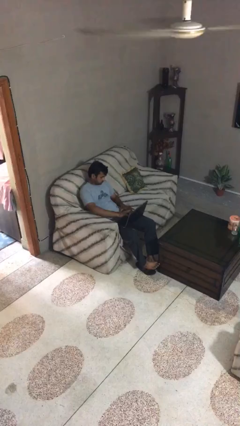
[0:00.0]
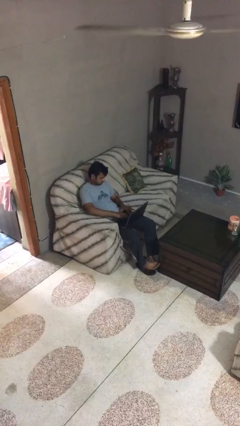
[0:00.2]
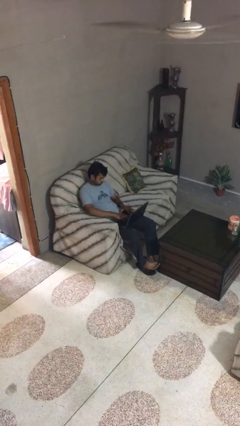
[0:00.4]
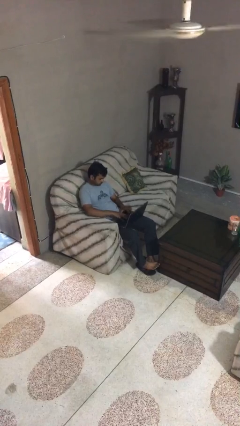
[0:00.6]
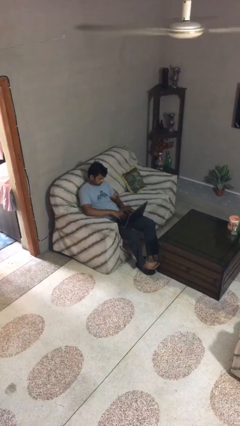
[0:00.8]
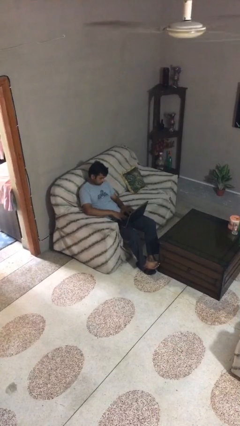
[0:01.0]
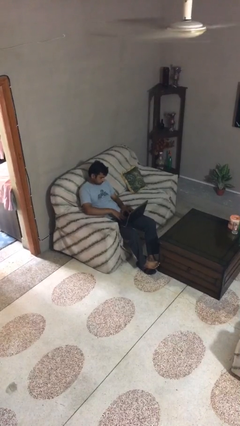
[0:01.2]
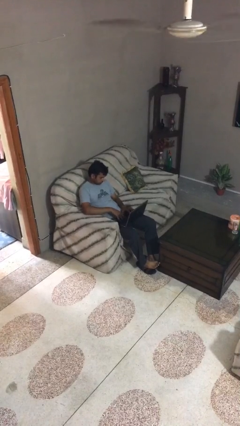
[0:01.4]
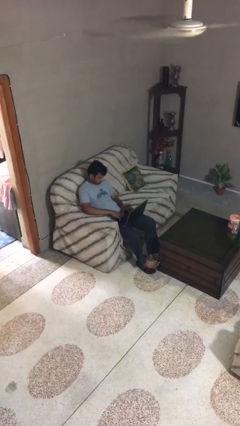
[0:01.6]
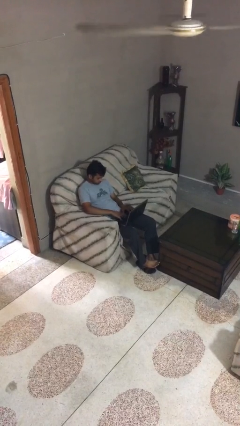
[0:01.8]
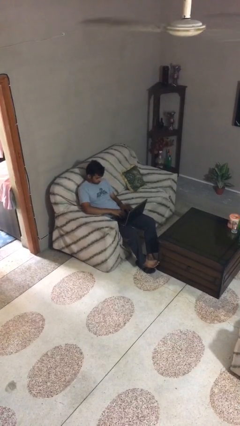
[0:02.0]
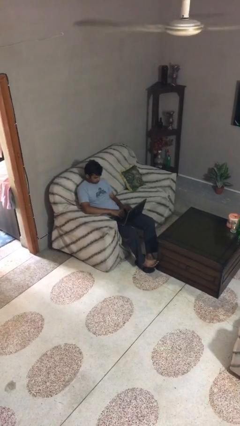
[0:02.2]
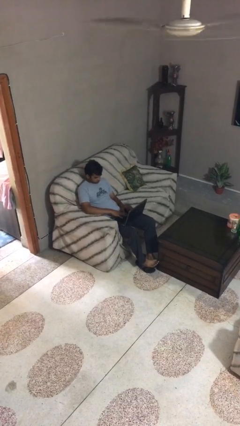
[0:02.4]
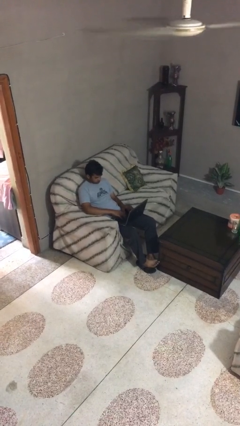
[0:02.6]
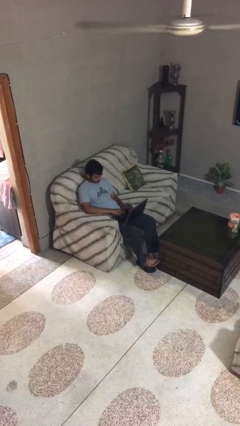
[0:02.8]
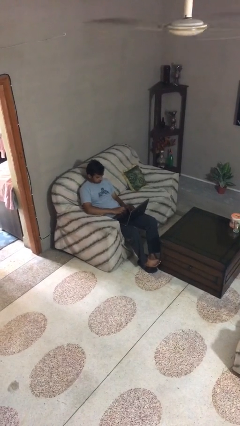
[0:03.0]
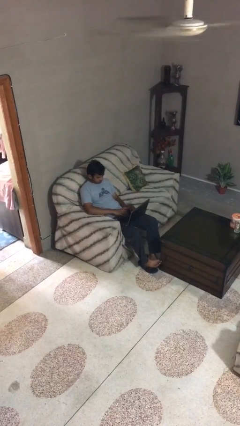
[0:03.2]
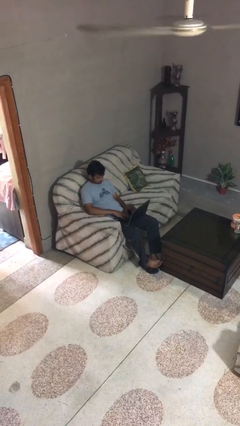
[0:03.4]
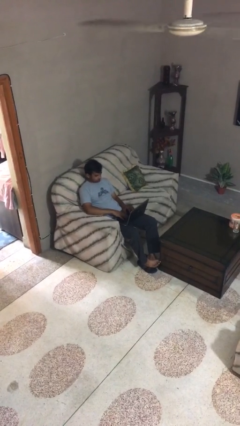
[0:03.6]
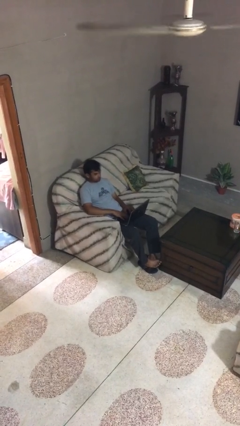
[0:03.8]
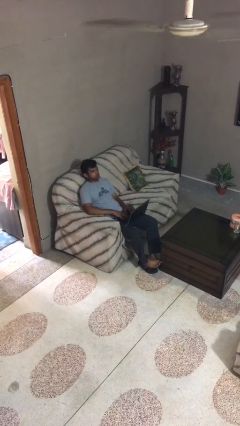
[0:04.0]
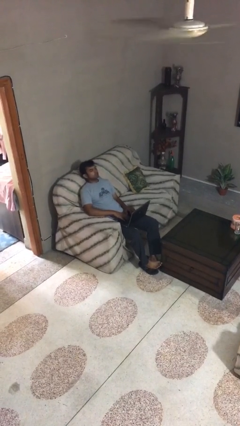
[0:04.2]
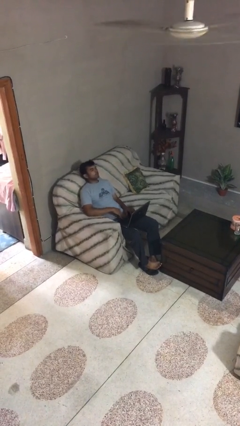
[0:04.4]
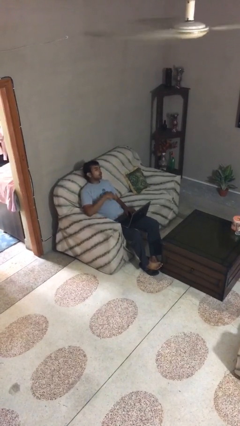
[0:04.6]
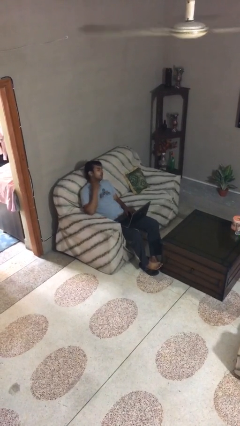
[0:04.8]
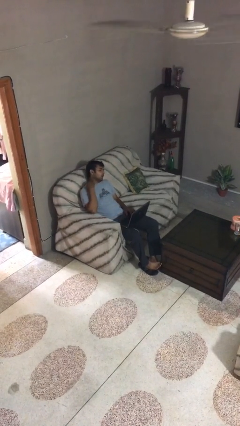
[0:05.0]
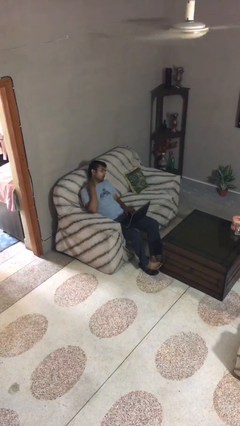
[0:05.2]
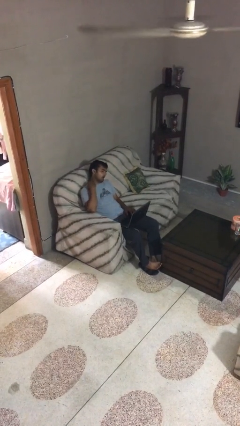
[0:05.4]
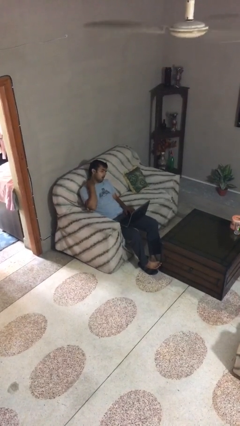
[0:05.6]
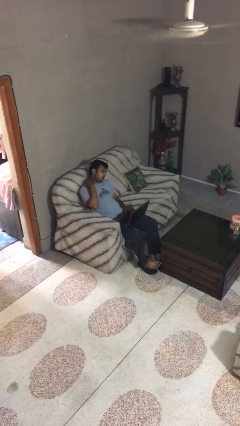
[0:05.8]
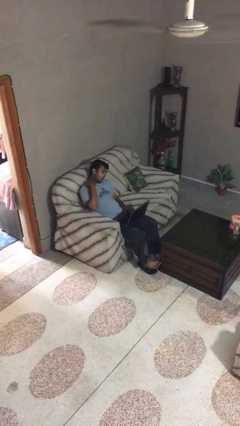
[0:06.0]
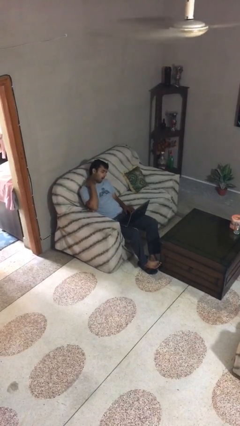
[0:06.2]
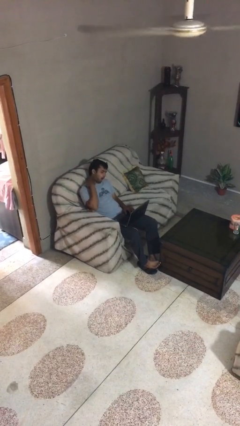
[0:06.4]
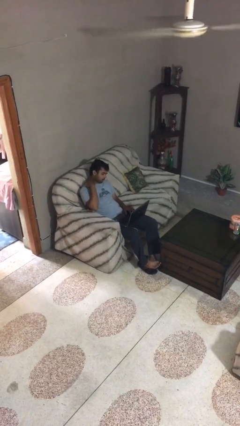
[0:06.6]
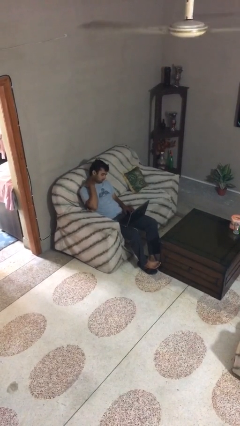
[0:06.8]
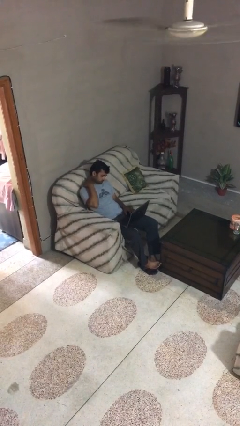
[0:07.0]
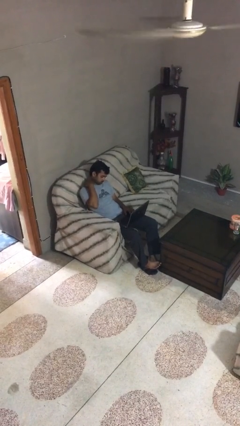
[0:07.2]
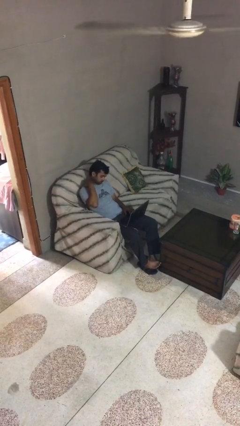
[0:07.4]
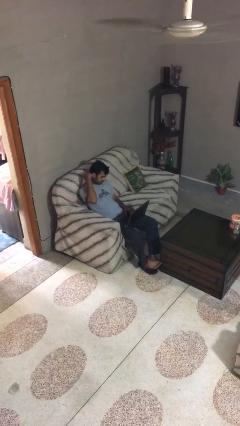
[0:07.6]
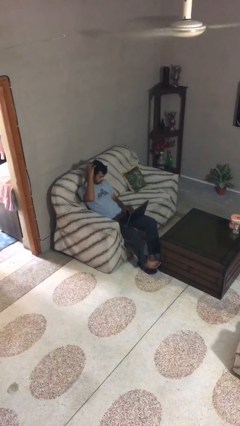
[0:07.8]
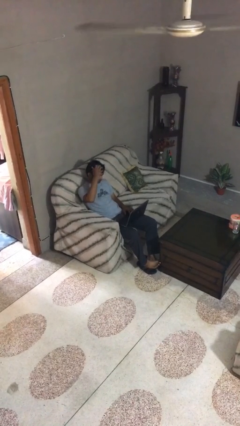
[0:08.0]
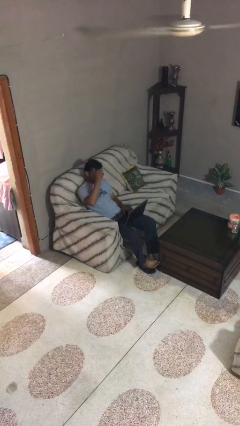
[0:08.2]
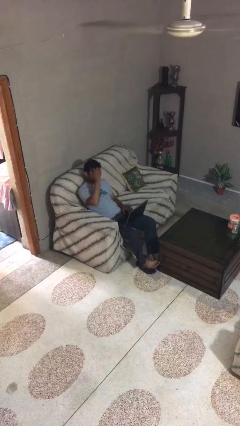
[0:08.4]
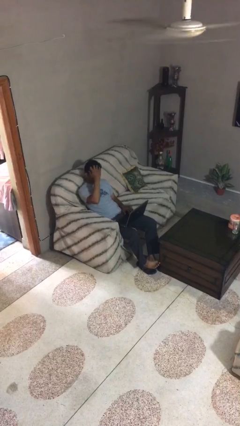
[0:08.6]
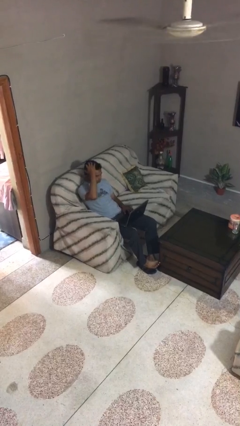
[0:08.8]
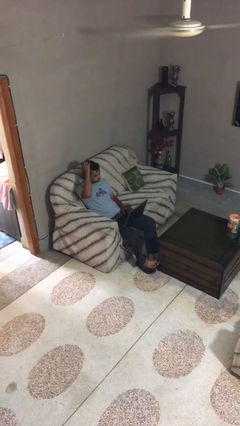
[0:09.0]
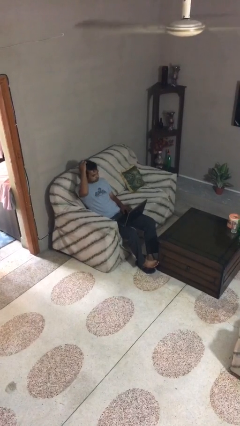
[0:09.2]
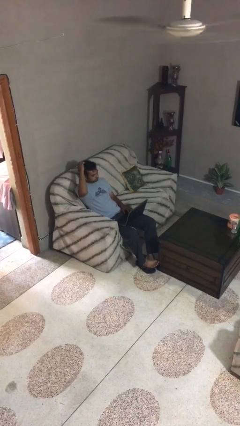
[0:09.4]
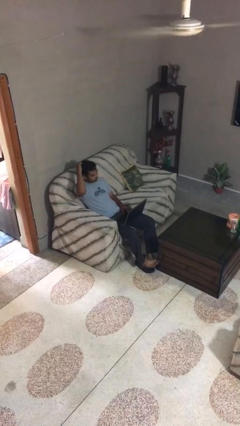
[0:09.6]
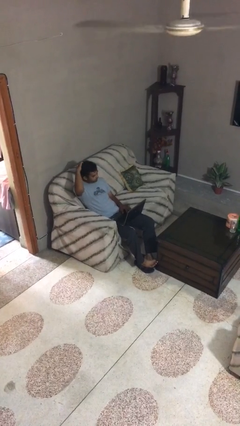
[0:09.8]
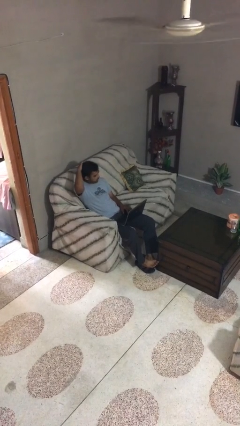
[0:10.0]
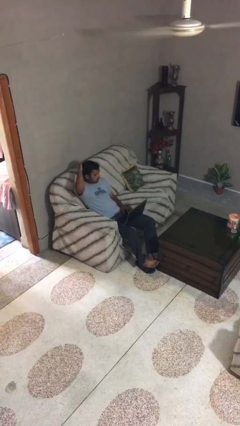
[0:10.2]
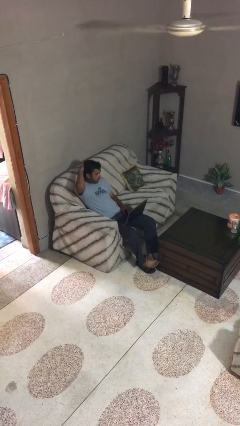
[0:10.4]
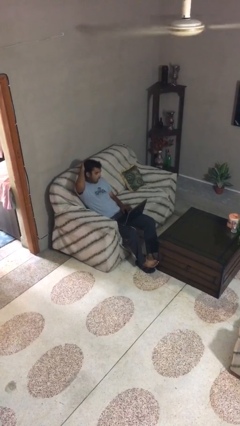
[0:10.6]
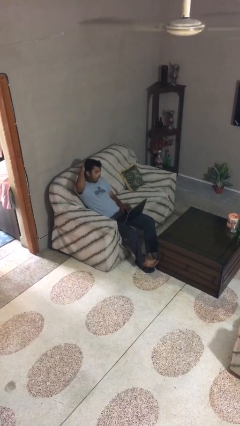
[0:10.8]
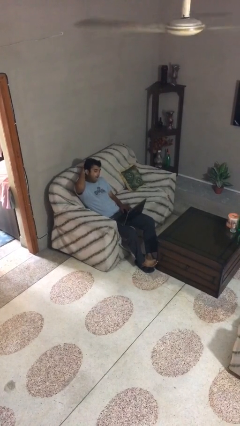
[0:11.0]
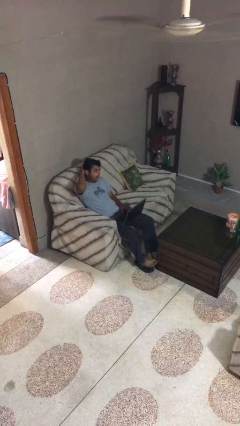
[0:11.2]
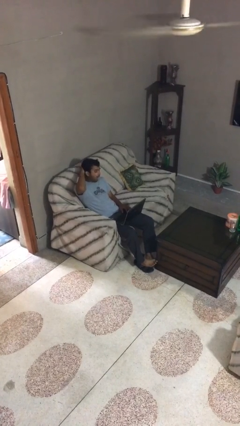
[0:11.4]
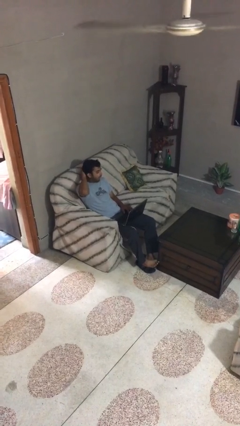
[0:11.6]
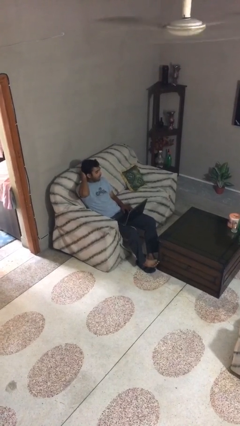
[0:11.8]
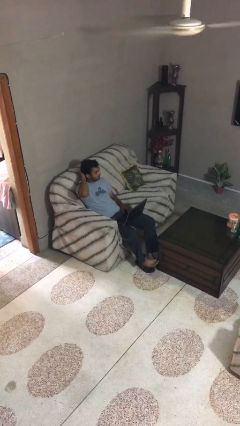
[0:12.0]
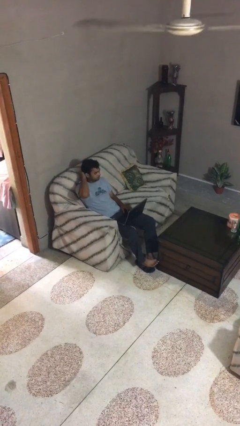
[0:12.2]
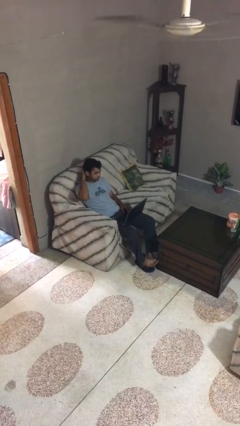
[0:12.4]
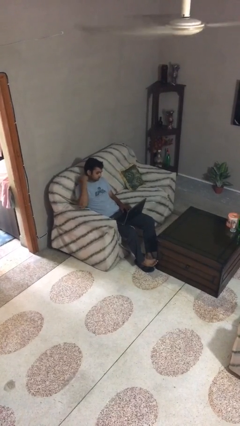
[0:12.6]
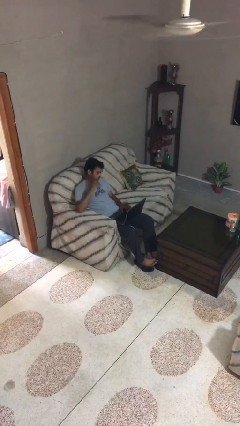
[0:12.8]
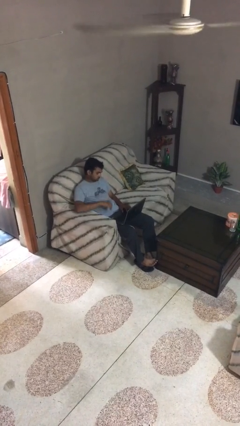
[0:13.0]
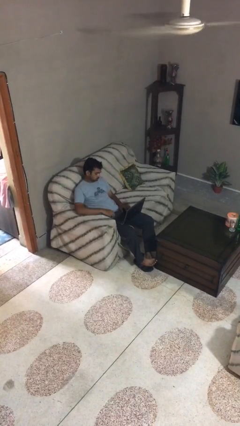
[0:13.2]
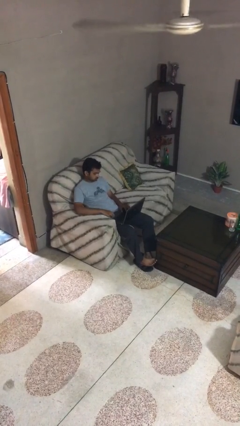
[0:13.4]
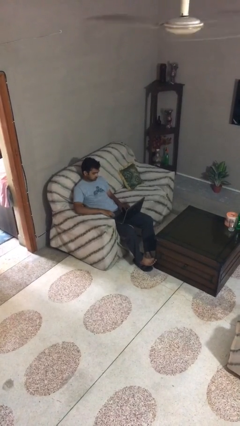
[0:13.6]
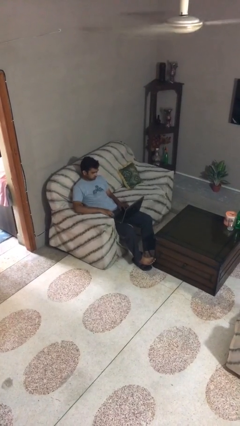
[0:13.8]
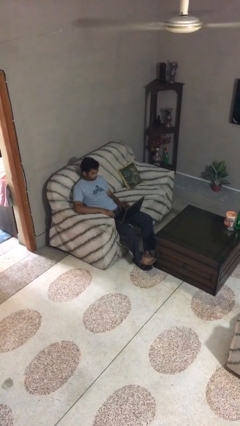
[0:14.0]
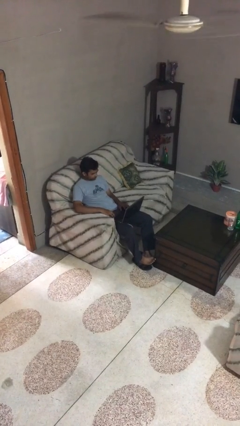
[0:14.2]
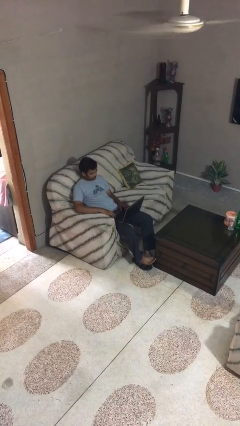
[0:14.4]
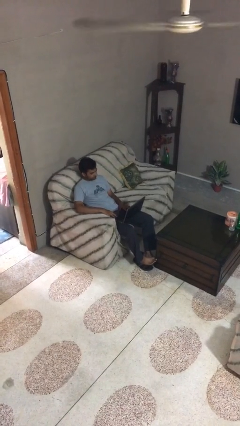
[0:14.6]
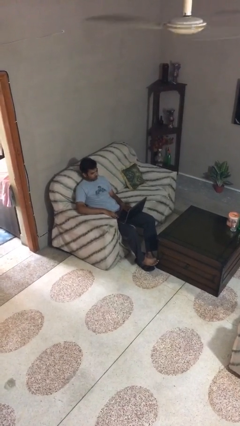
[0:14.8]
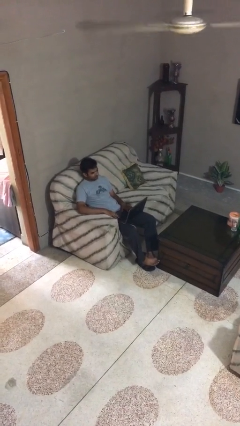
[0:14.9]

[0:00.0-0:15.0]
person interacts with laptop

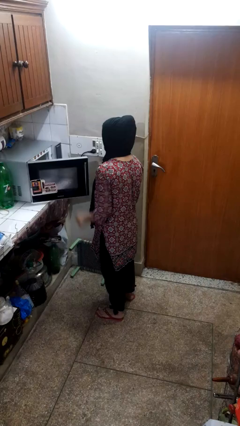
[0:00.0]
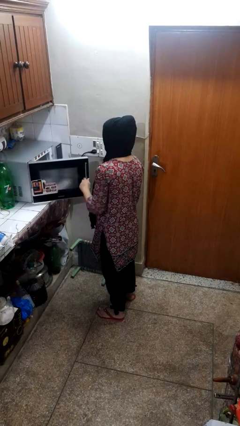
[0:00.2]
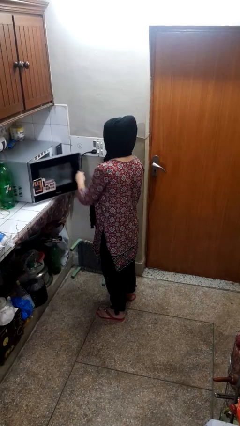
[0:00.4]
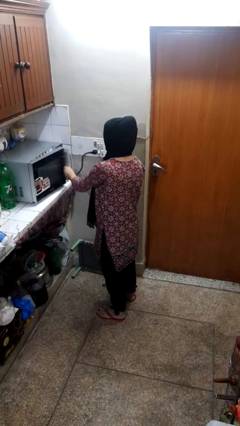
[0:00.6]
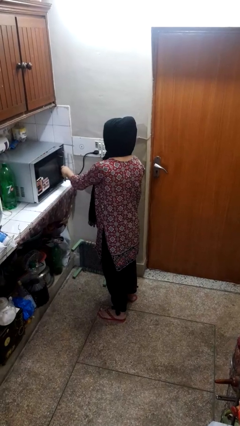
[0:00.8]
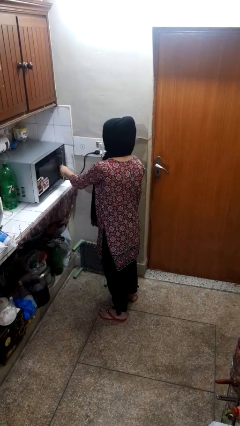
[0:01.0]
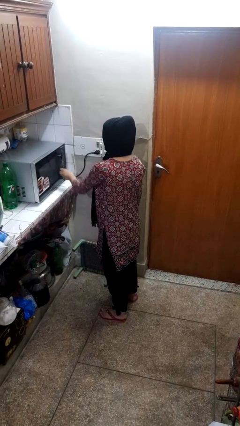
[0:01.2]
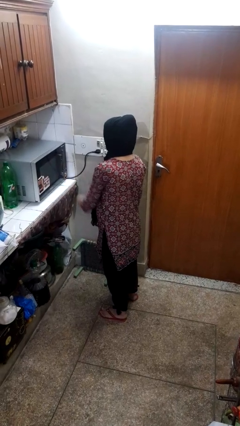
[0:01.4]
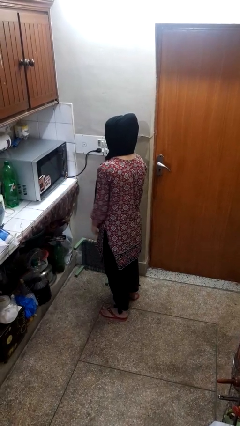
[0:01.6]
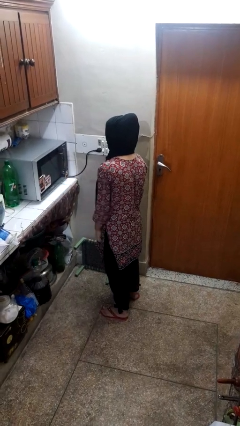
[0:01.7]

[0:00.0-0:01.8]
person closes oven door

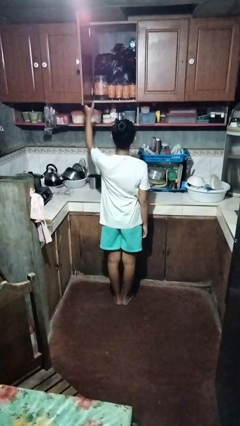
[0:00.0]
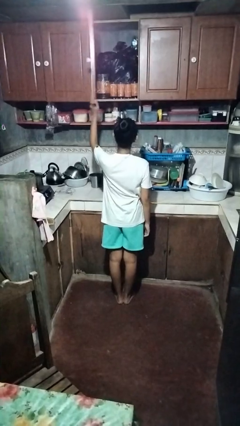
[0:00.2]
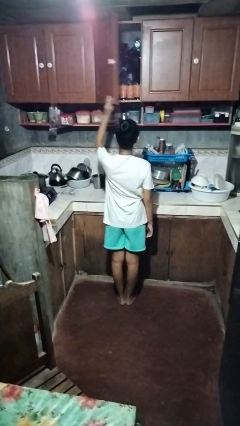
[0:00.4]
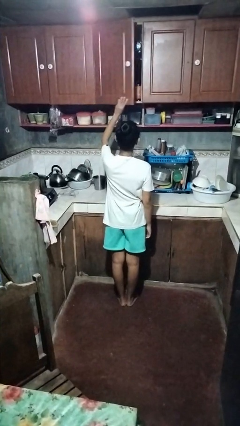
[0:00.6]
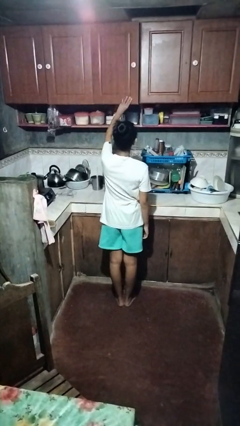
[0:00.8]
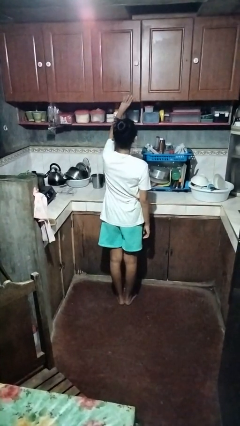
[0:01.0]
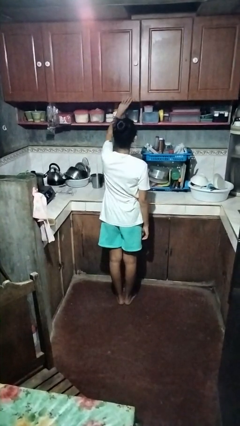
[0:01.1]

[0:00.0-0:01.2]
person closes cabinet
